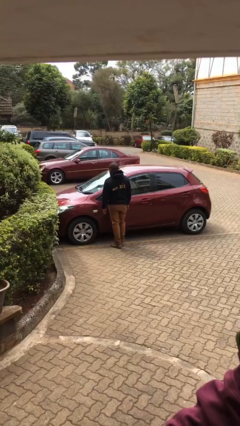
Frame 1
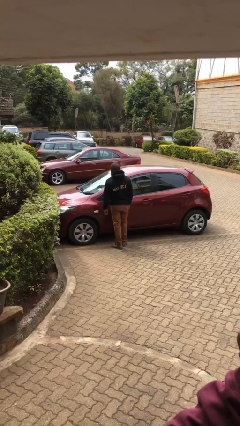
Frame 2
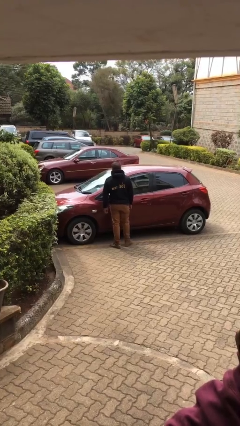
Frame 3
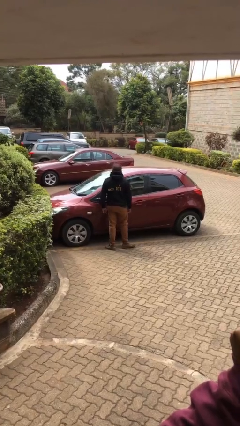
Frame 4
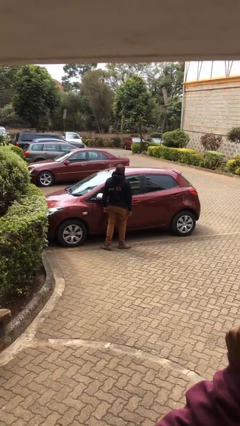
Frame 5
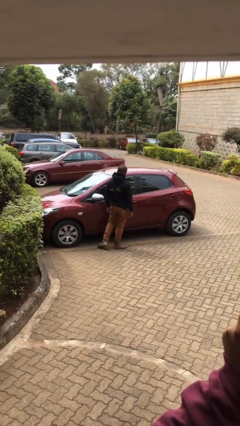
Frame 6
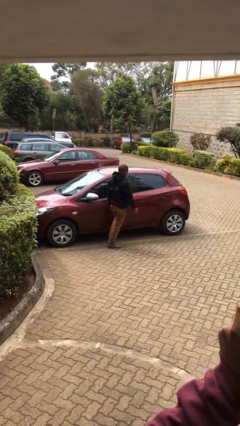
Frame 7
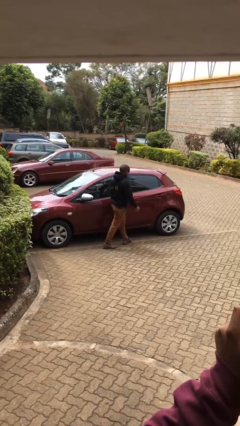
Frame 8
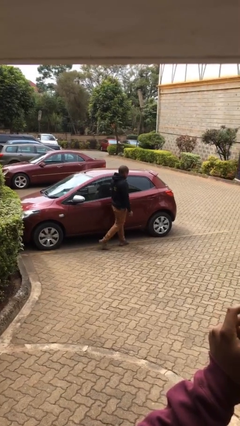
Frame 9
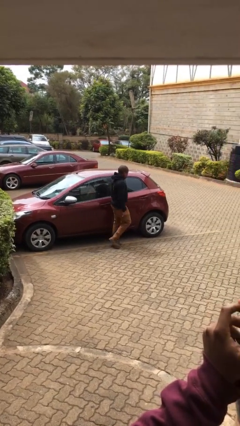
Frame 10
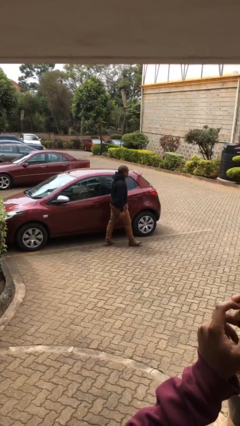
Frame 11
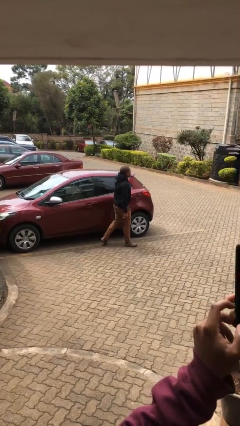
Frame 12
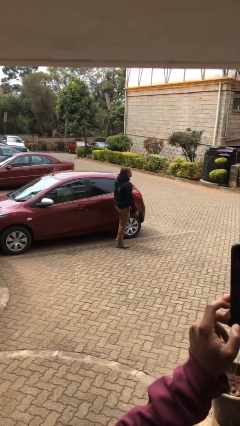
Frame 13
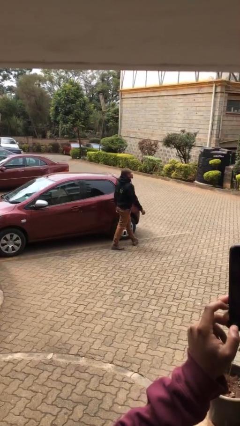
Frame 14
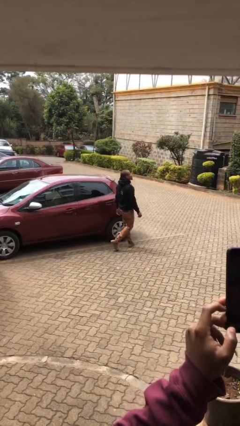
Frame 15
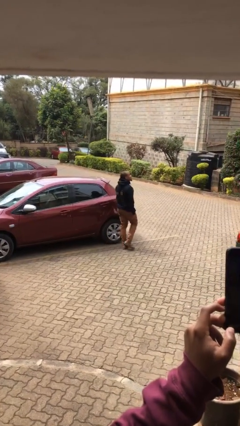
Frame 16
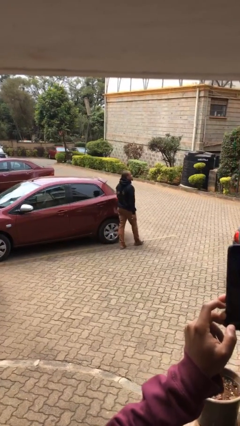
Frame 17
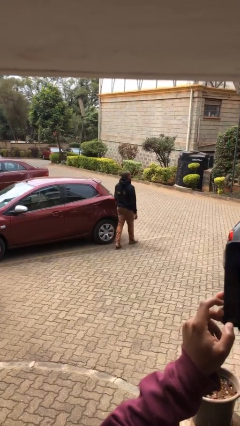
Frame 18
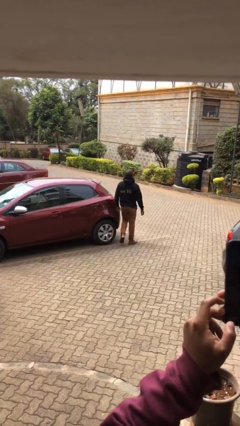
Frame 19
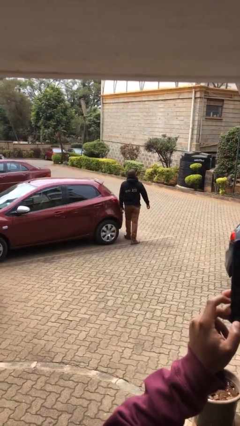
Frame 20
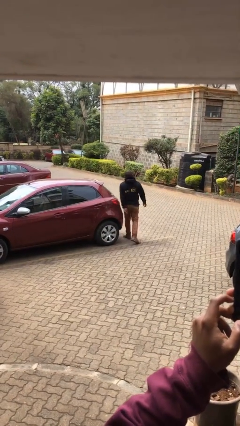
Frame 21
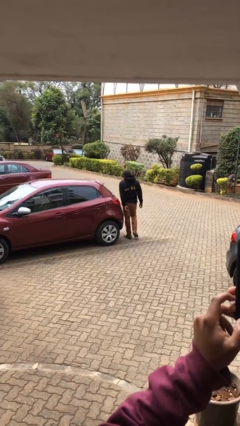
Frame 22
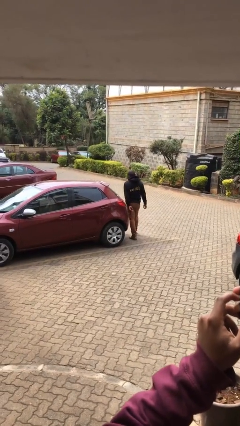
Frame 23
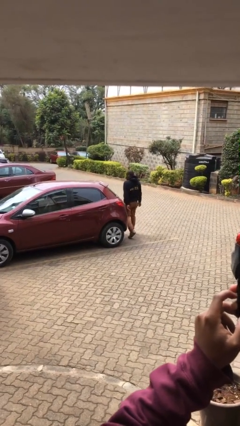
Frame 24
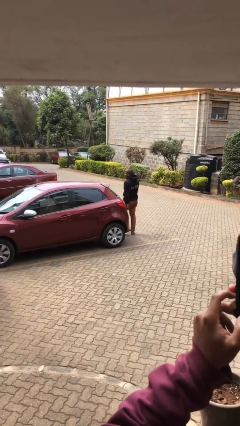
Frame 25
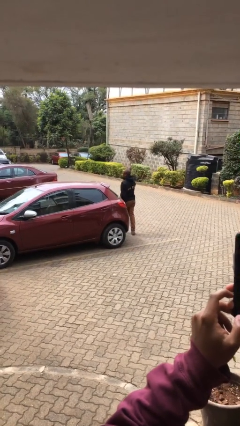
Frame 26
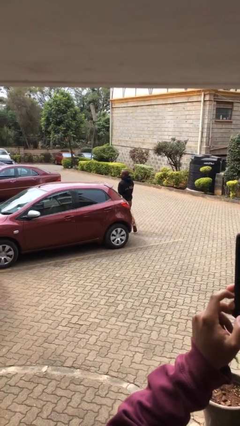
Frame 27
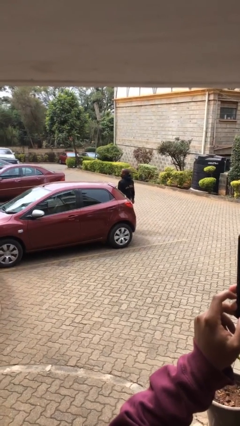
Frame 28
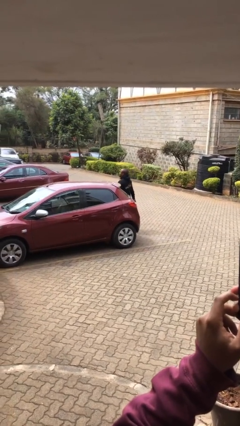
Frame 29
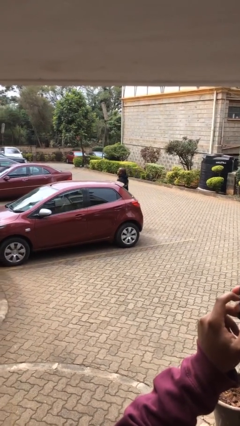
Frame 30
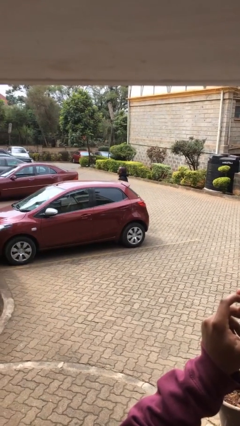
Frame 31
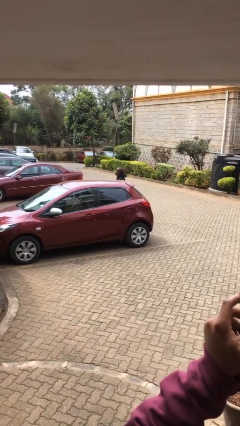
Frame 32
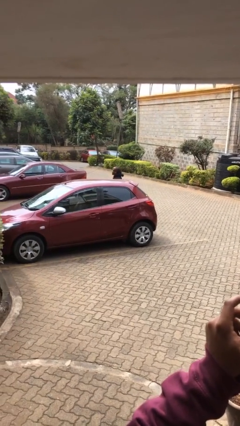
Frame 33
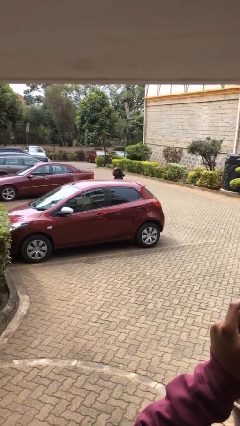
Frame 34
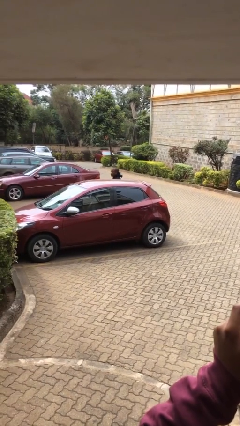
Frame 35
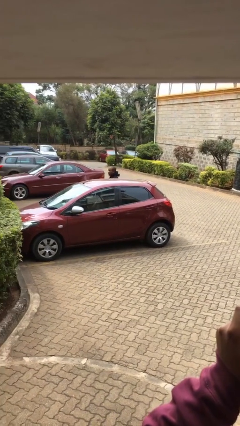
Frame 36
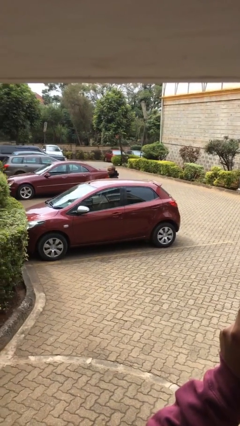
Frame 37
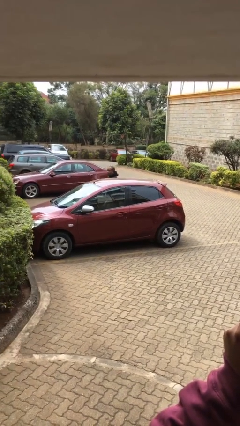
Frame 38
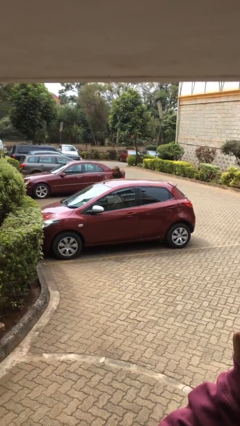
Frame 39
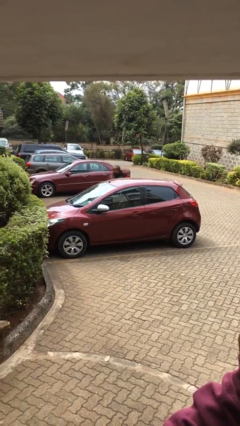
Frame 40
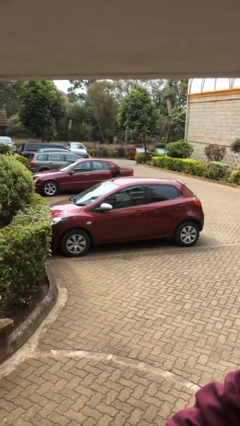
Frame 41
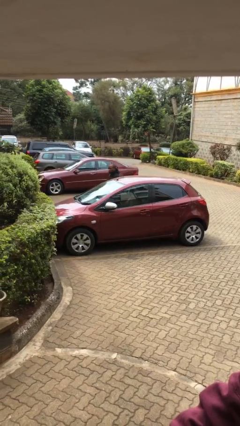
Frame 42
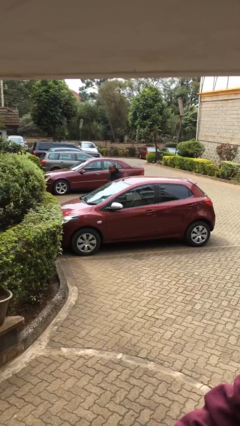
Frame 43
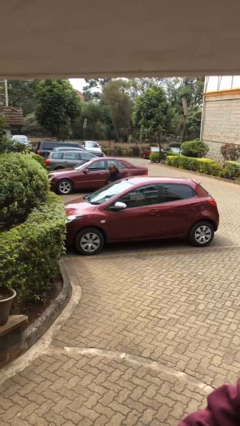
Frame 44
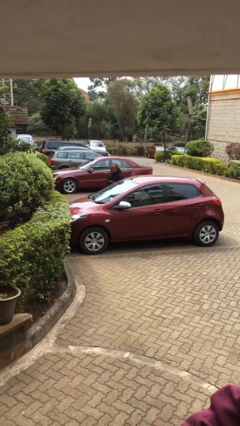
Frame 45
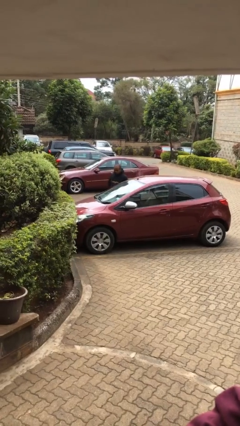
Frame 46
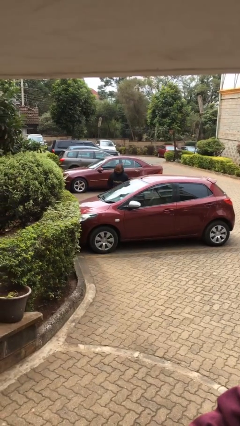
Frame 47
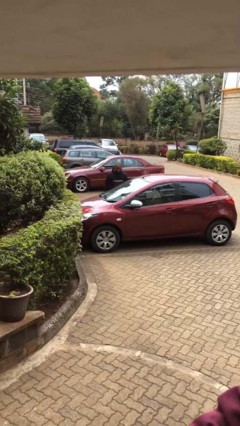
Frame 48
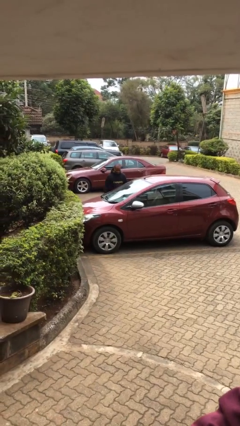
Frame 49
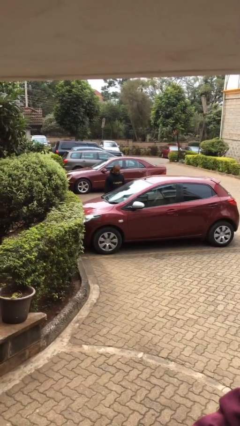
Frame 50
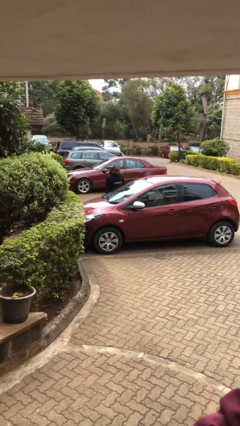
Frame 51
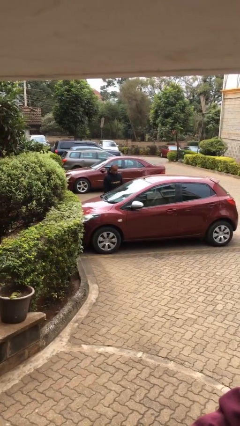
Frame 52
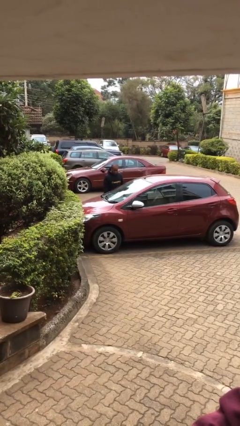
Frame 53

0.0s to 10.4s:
person walks around car

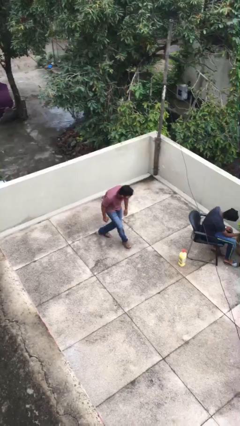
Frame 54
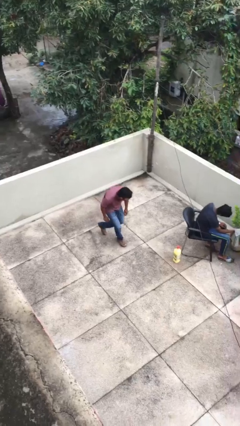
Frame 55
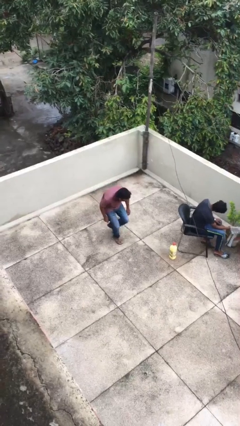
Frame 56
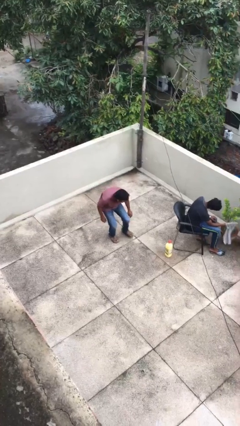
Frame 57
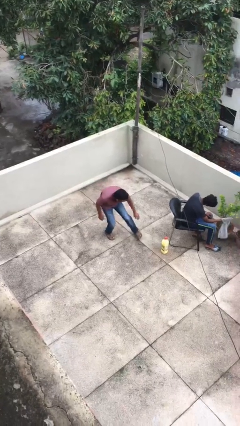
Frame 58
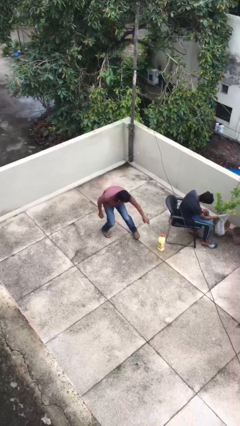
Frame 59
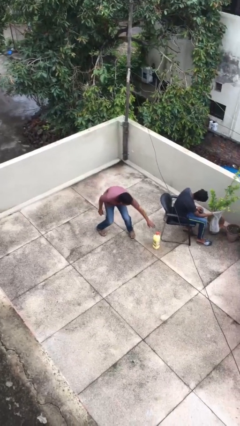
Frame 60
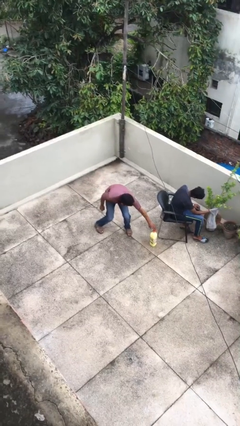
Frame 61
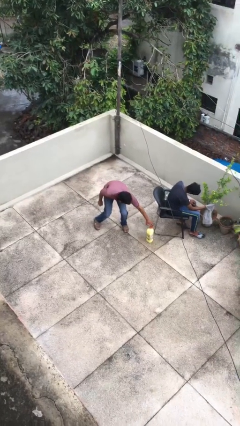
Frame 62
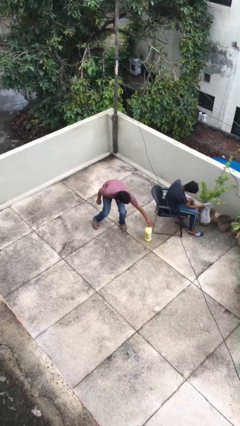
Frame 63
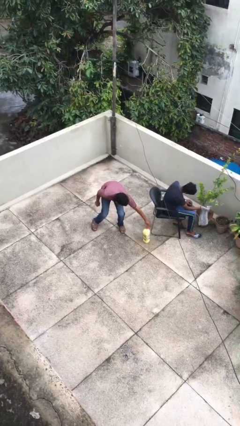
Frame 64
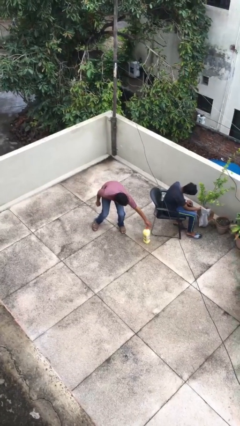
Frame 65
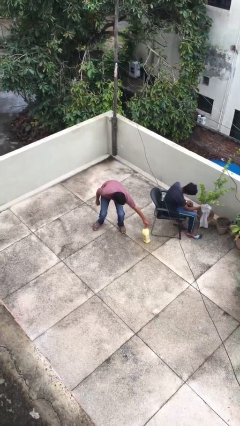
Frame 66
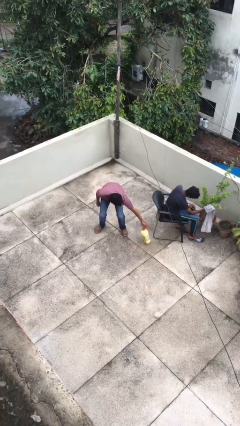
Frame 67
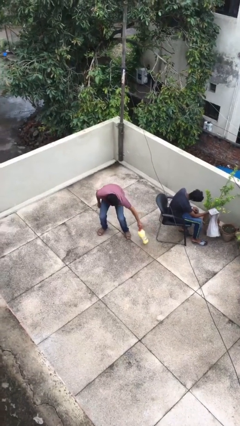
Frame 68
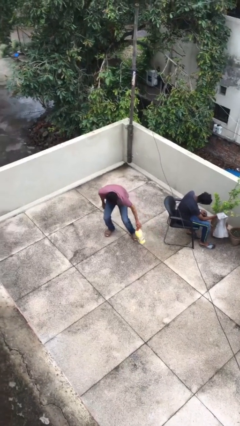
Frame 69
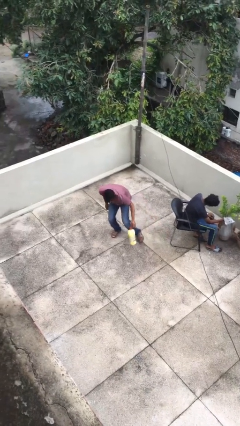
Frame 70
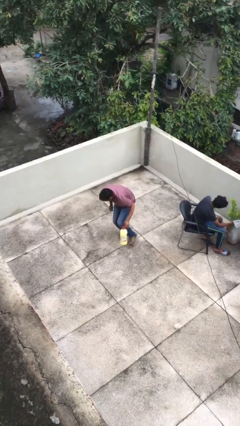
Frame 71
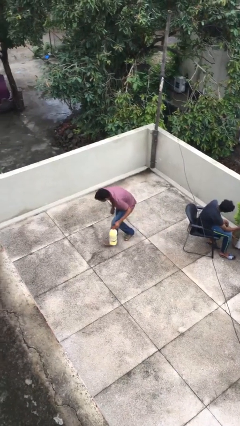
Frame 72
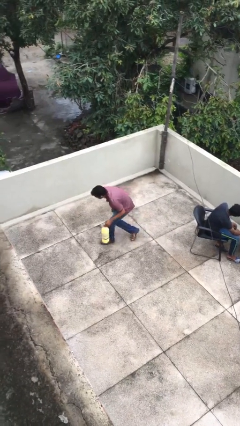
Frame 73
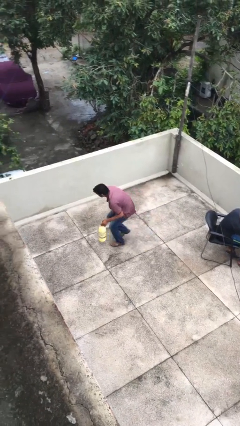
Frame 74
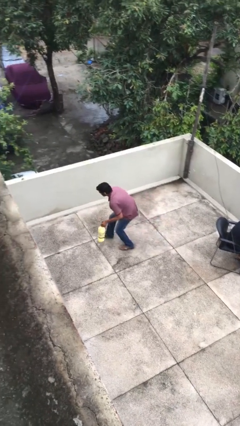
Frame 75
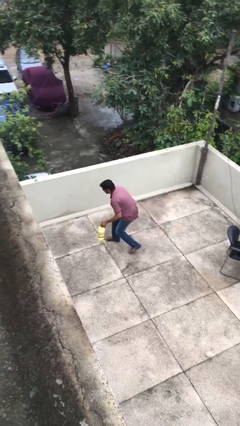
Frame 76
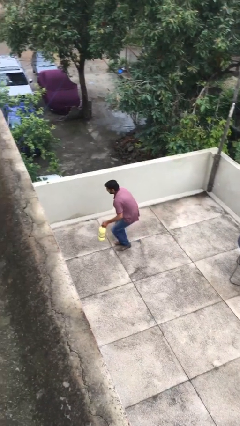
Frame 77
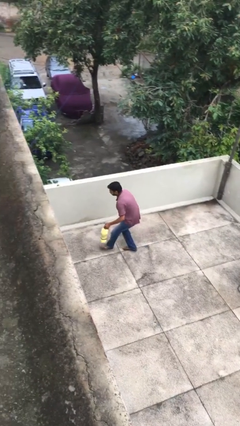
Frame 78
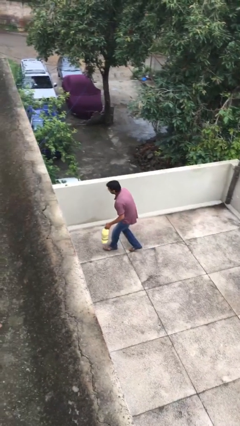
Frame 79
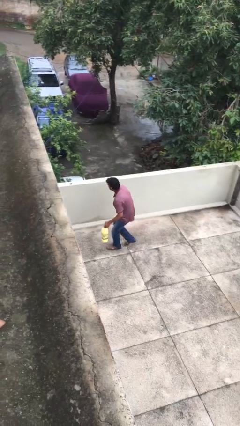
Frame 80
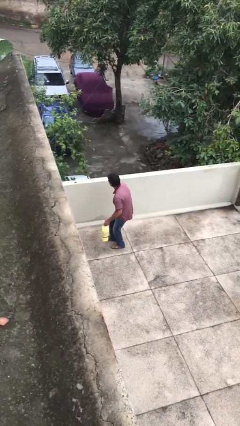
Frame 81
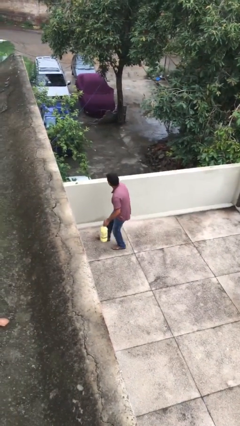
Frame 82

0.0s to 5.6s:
person steals object from person

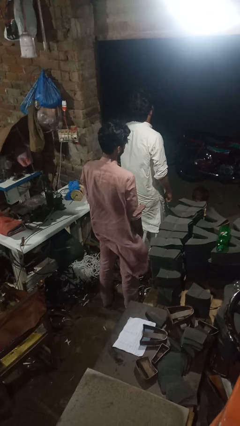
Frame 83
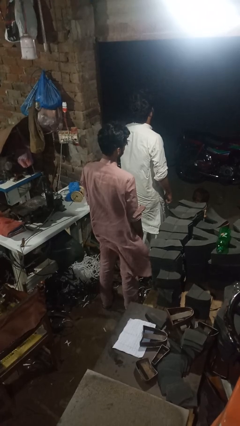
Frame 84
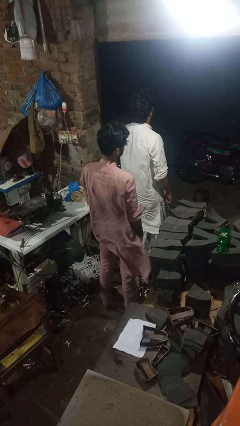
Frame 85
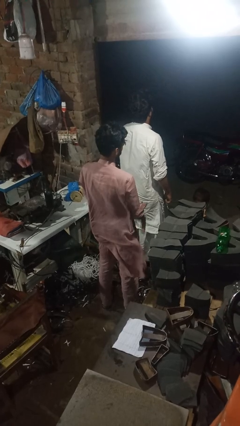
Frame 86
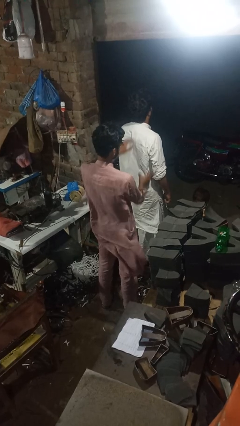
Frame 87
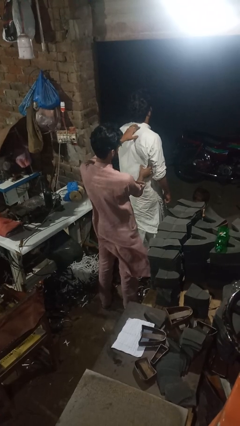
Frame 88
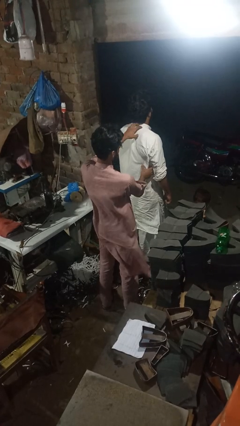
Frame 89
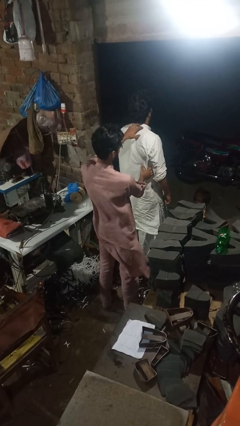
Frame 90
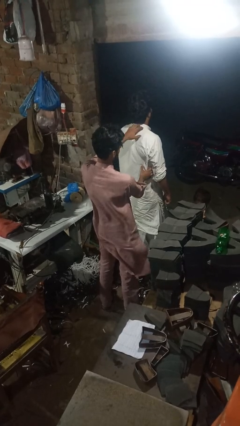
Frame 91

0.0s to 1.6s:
person tickles person

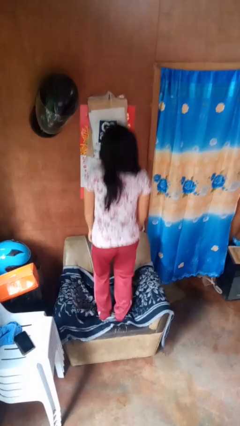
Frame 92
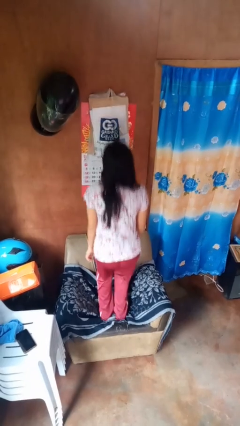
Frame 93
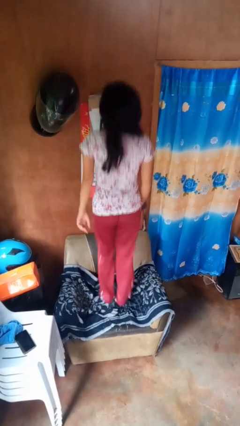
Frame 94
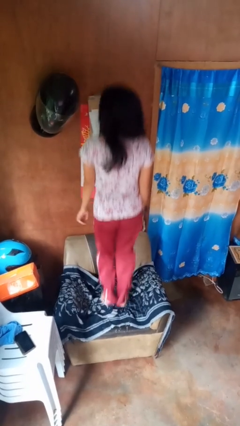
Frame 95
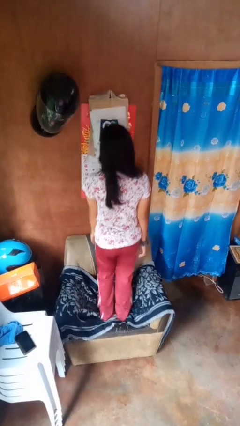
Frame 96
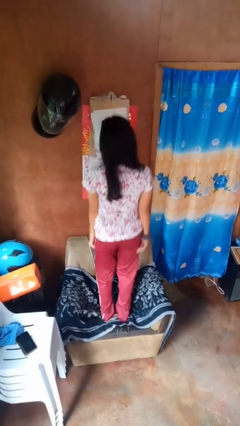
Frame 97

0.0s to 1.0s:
person jumps on couch
